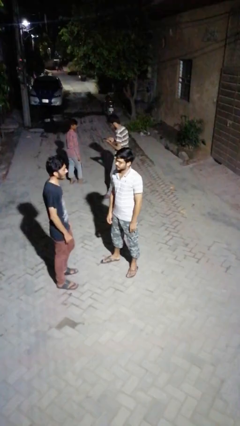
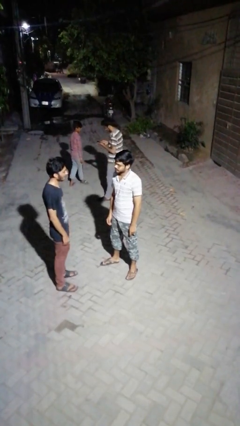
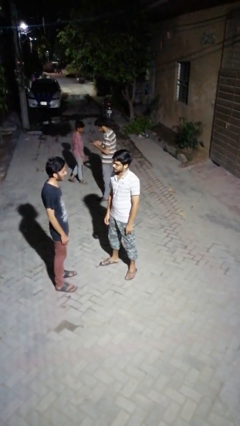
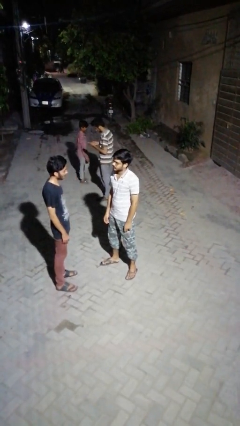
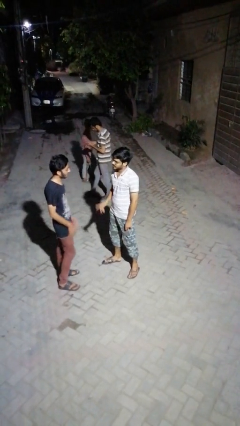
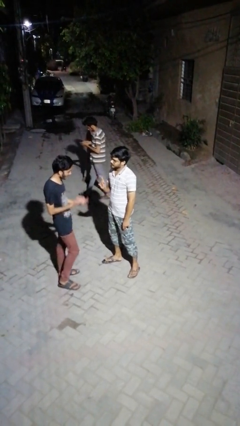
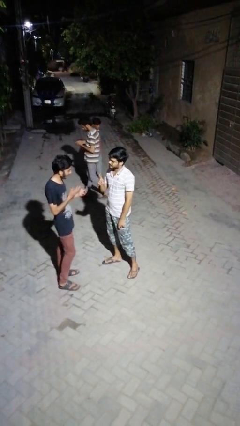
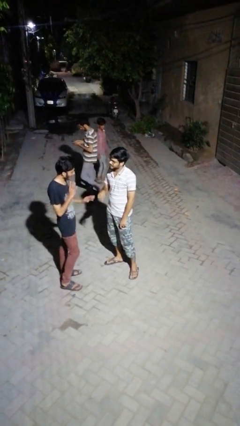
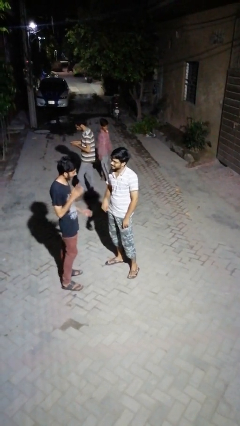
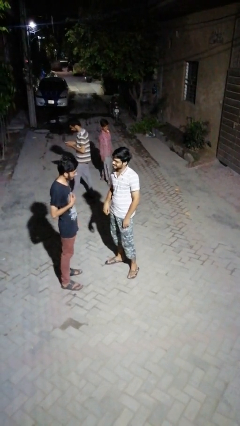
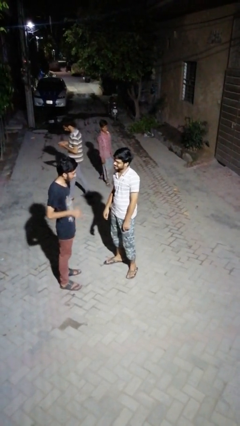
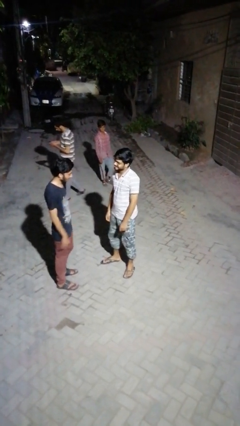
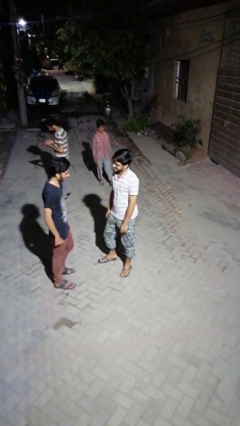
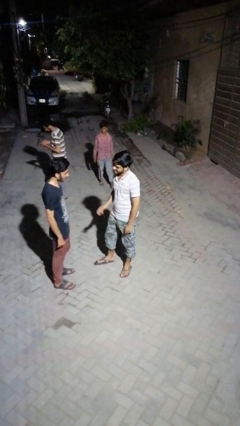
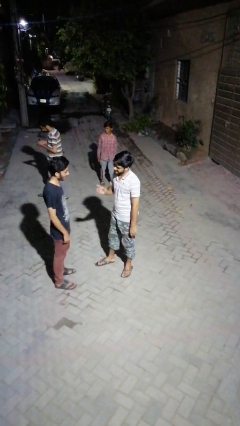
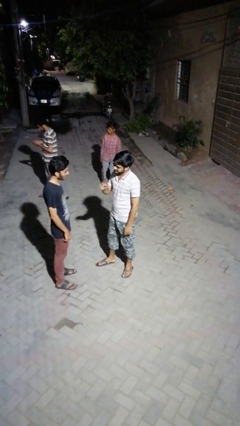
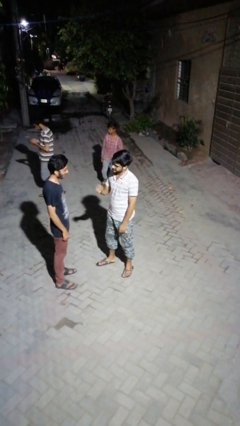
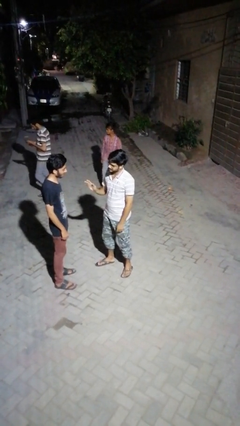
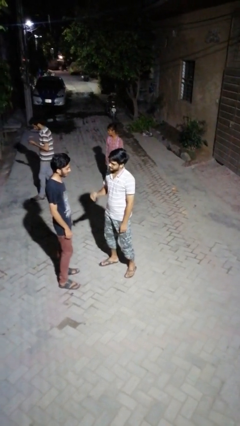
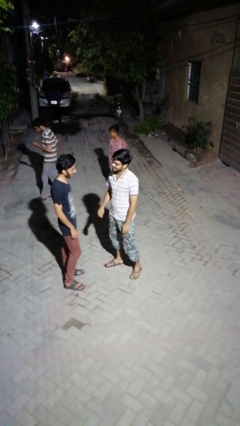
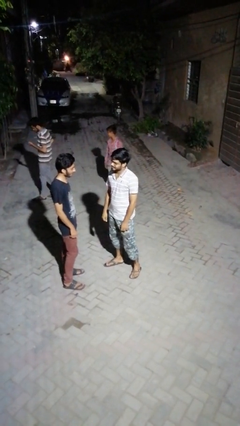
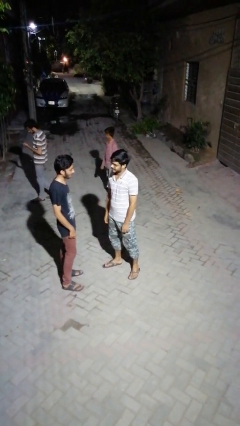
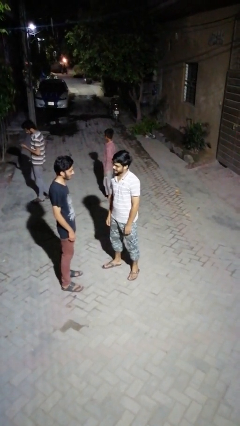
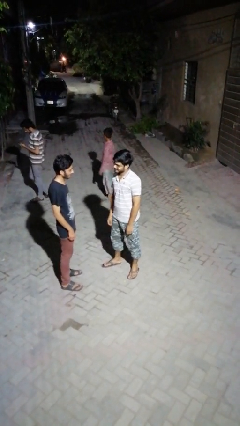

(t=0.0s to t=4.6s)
person talks to person

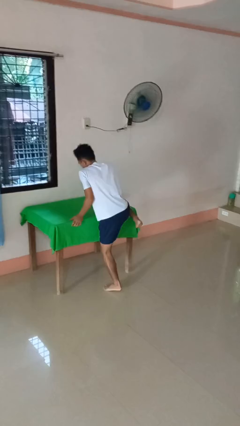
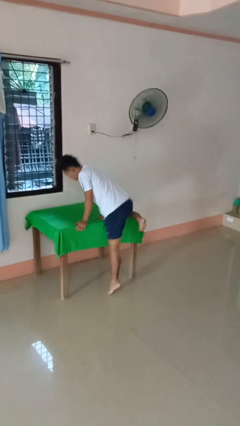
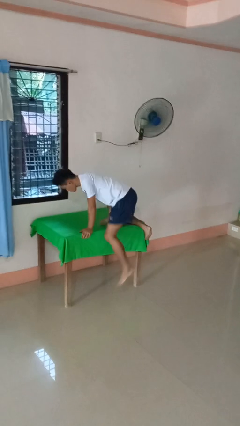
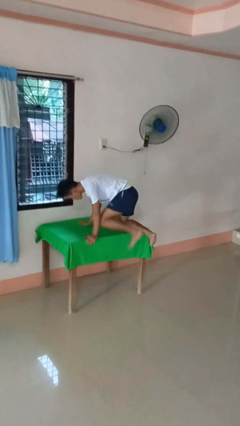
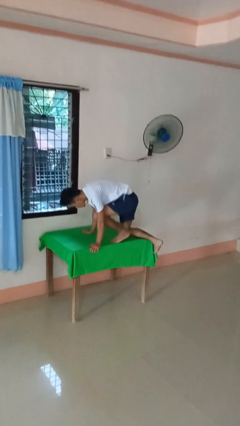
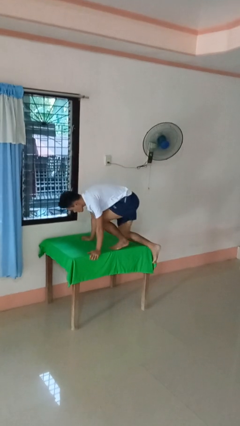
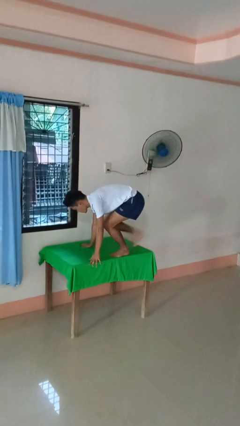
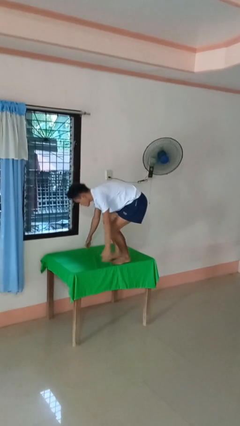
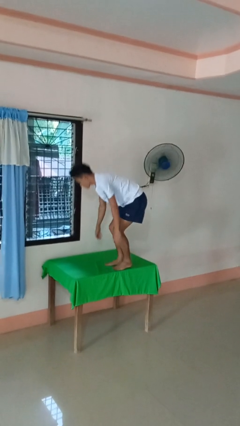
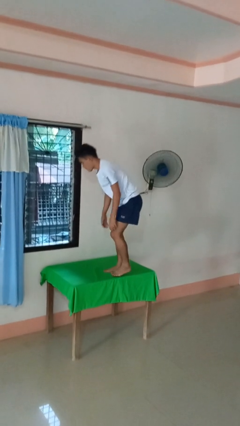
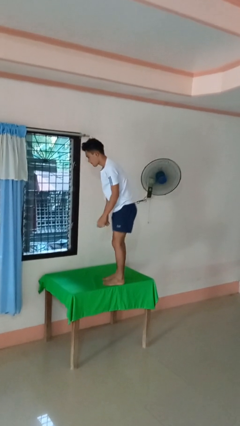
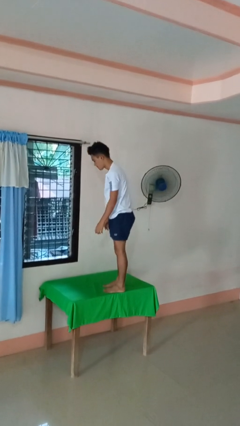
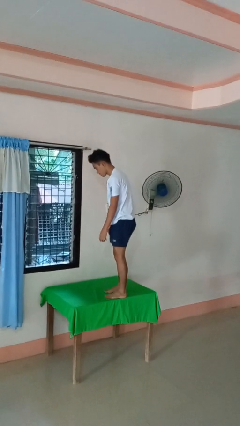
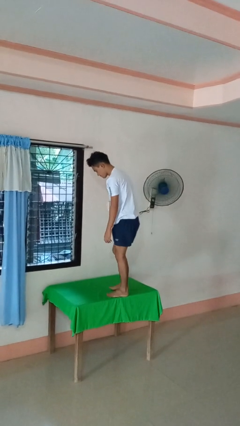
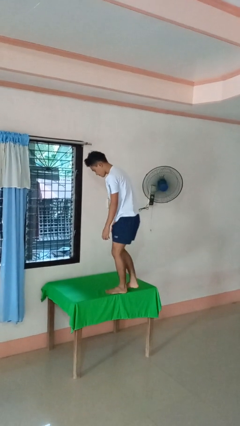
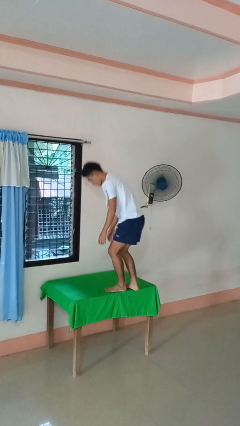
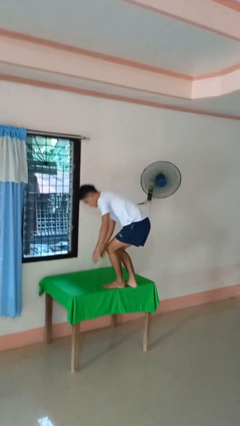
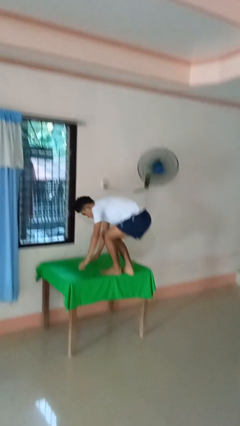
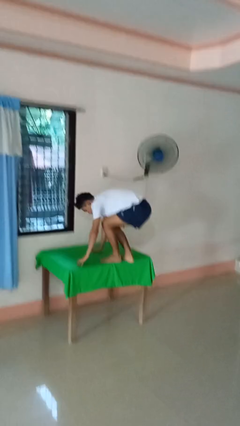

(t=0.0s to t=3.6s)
person climbs on table

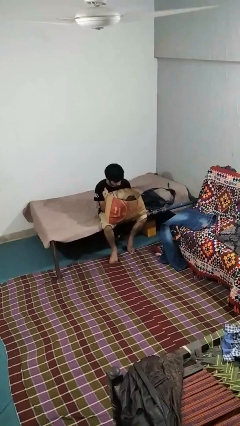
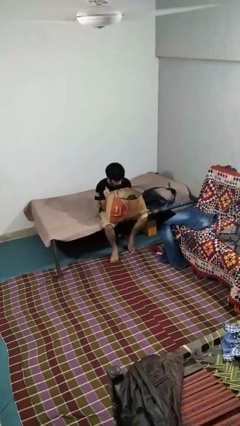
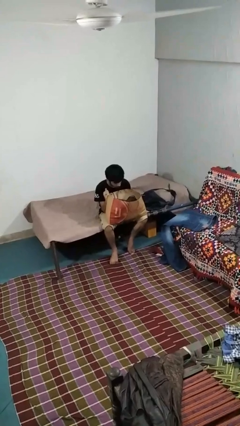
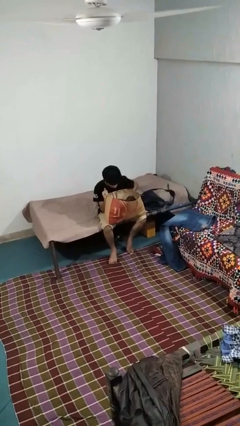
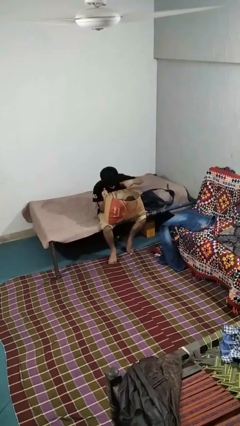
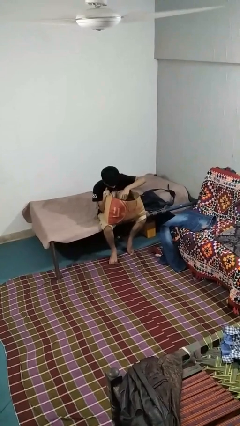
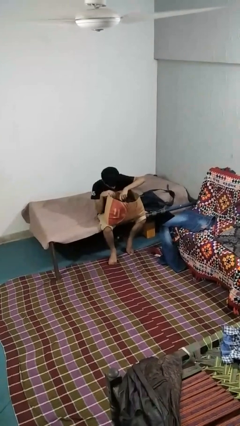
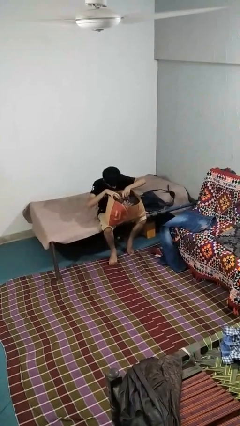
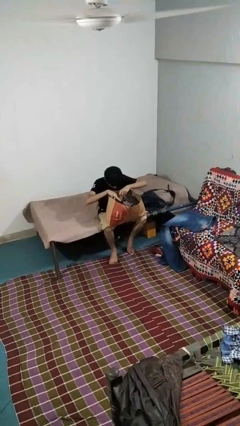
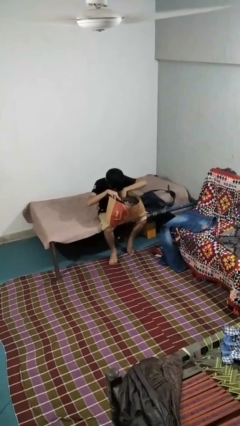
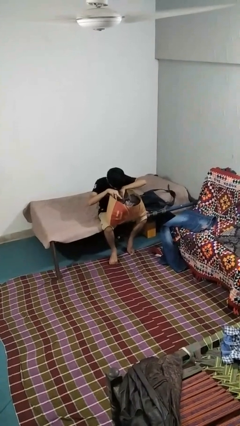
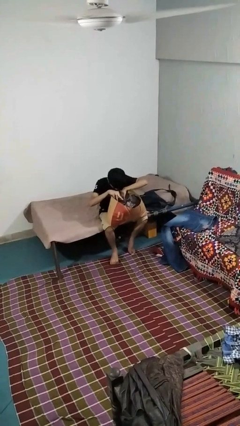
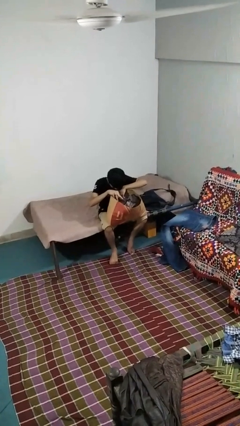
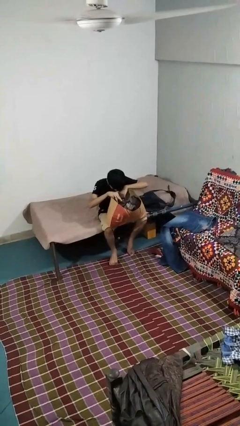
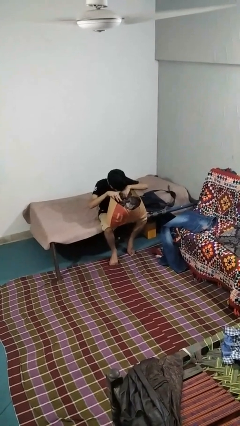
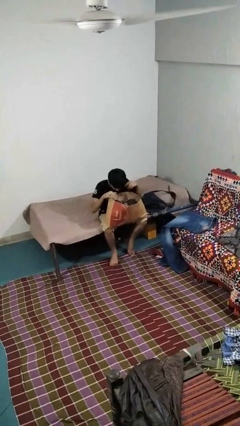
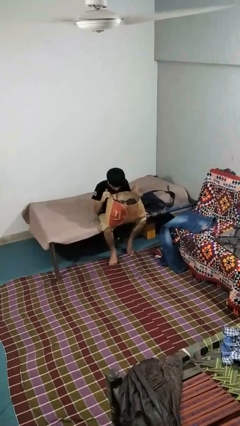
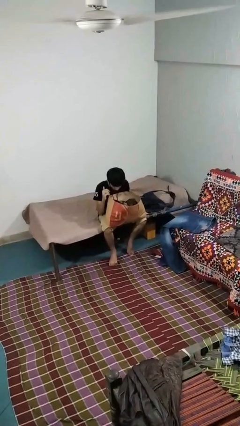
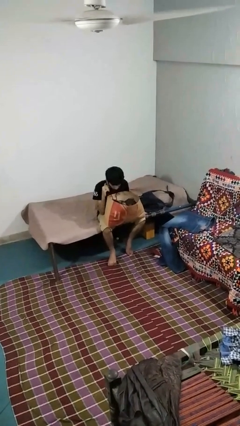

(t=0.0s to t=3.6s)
person searches in bag

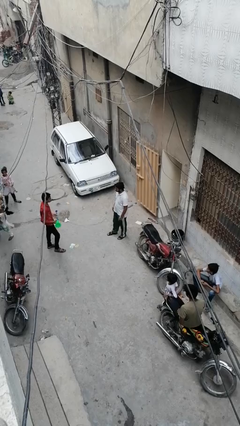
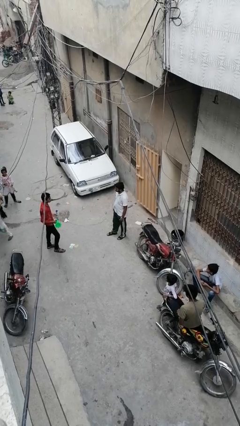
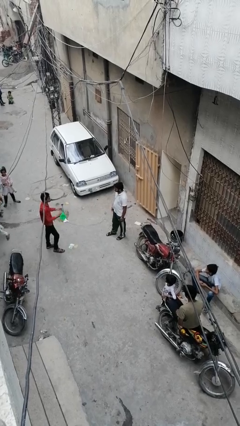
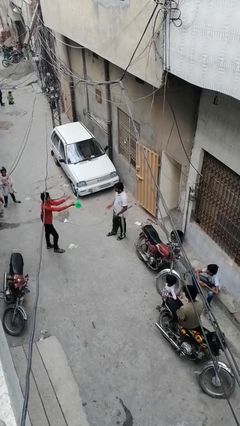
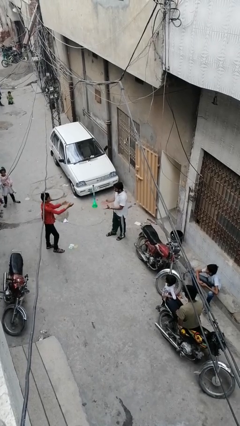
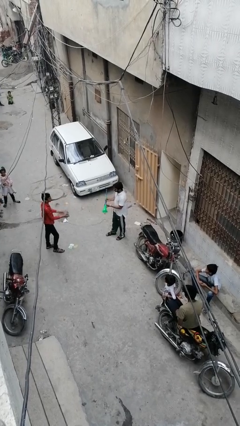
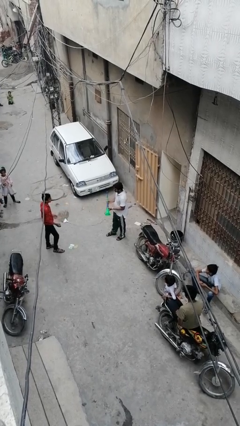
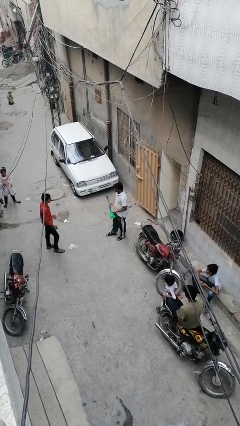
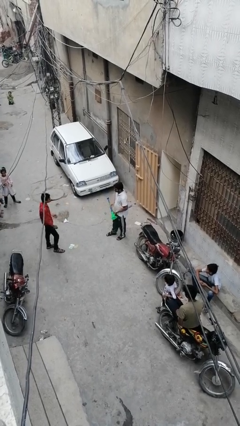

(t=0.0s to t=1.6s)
person catches object from person

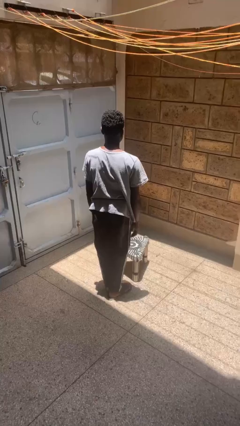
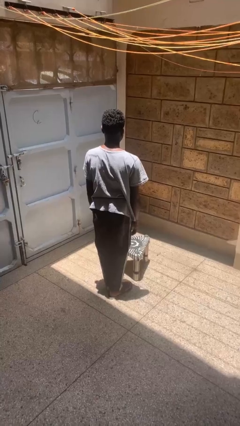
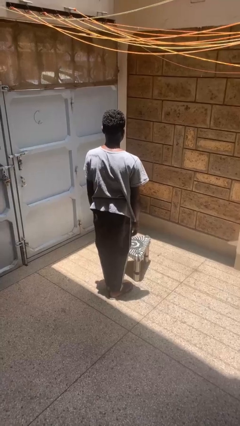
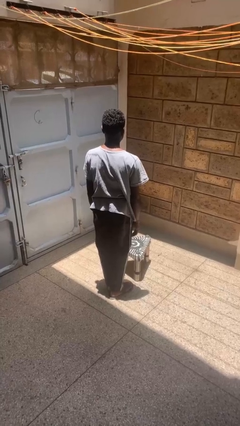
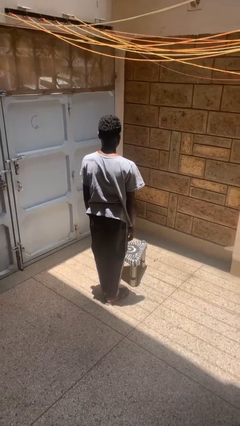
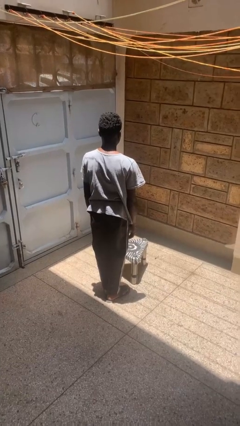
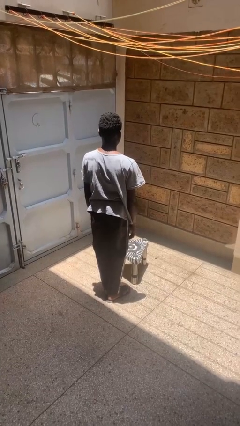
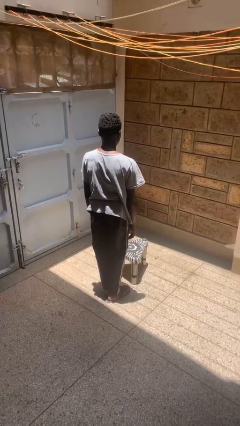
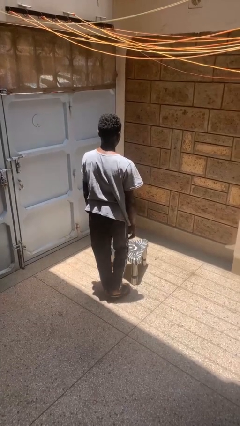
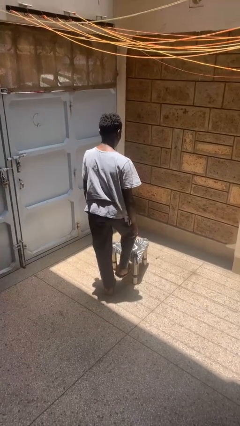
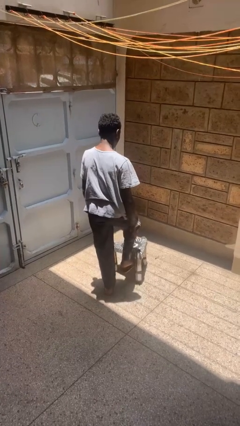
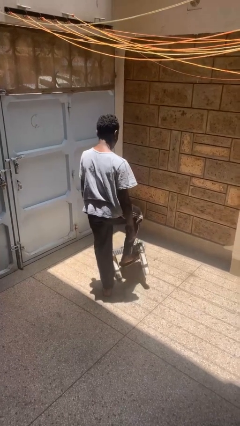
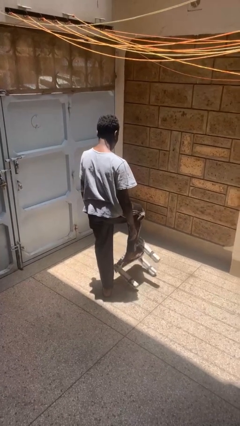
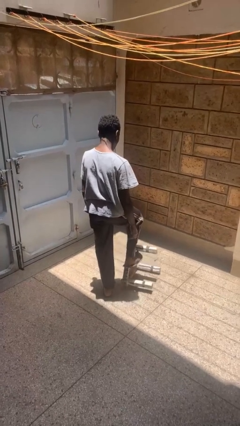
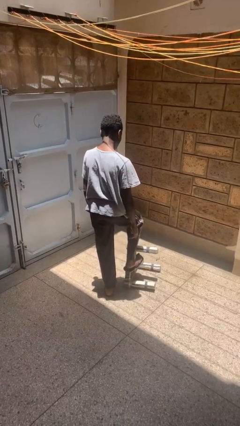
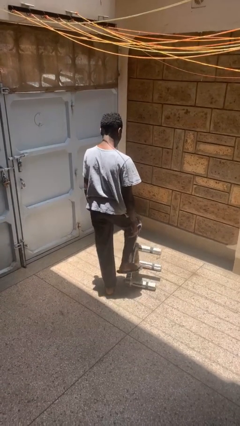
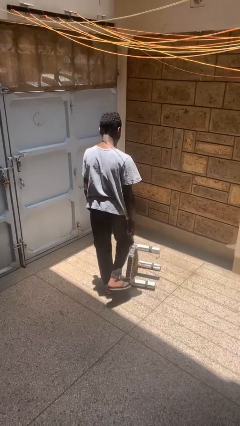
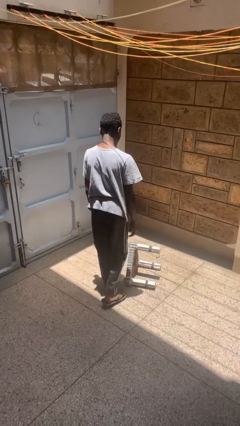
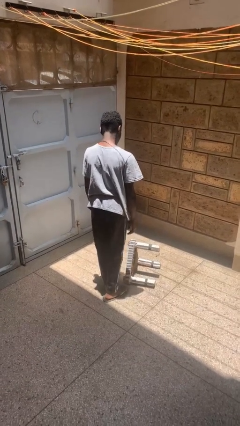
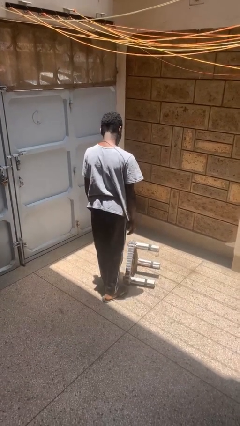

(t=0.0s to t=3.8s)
person knocks over furniture
